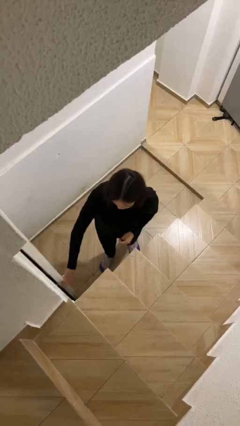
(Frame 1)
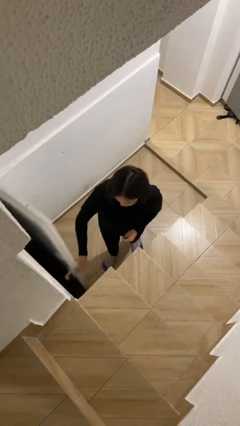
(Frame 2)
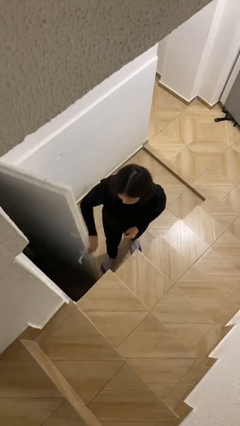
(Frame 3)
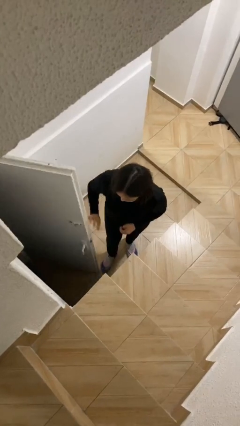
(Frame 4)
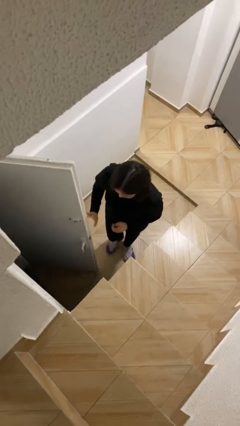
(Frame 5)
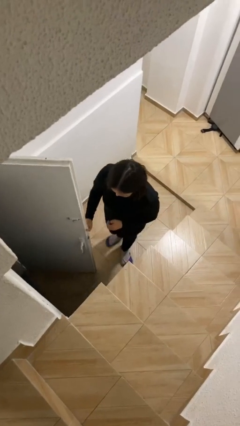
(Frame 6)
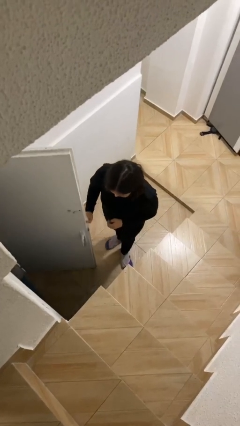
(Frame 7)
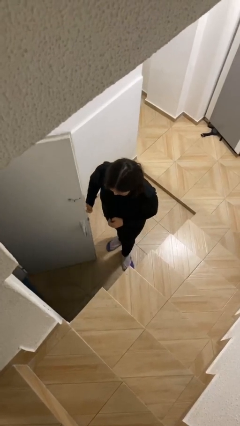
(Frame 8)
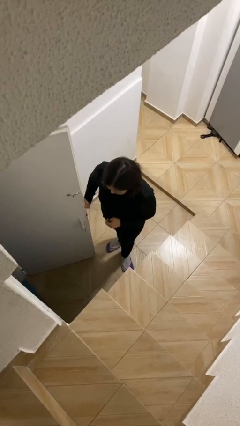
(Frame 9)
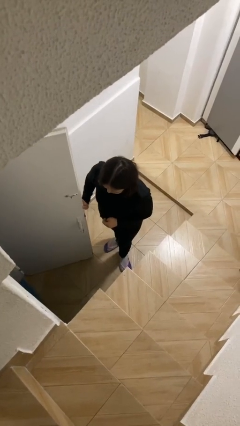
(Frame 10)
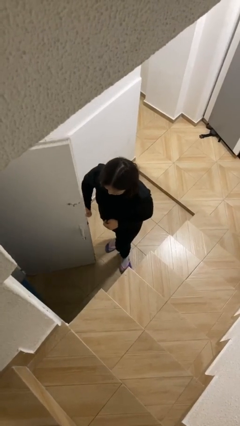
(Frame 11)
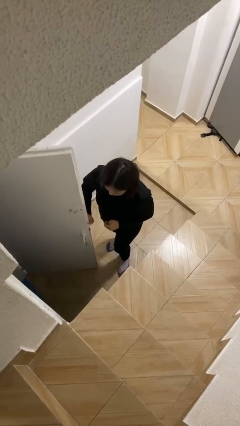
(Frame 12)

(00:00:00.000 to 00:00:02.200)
person opens facility door

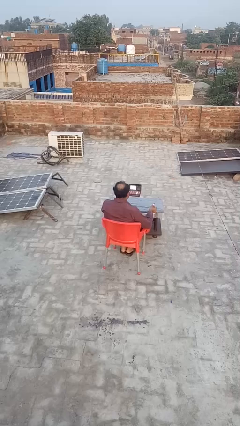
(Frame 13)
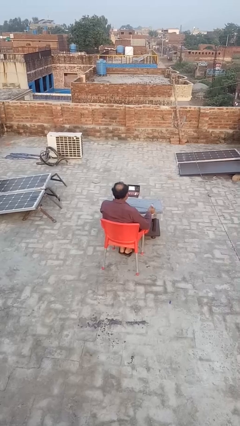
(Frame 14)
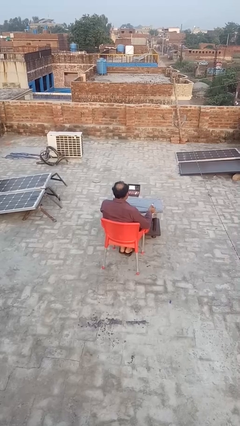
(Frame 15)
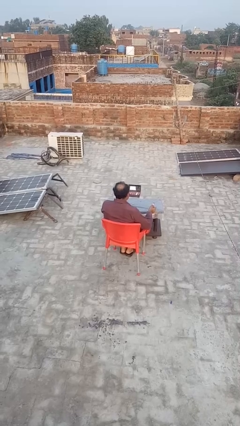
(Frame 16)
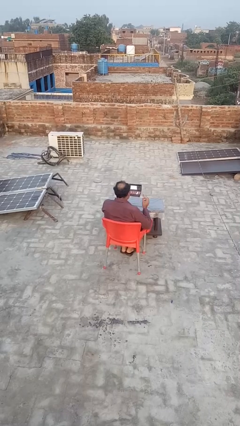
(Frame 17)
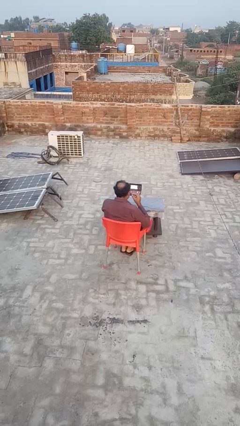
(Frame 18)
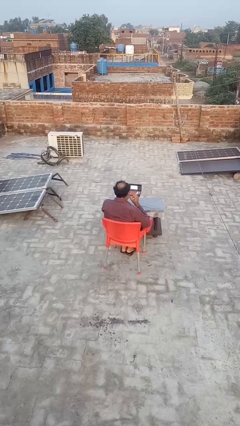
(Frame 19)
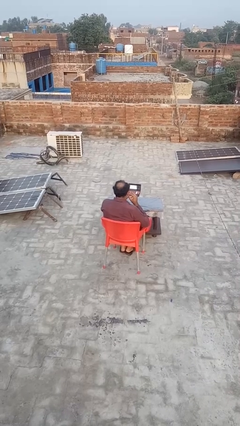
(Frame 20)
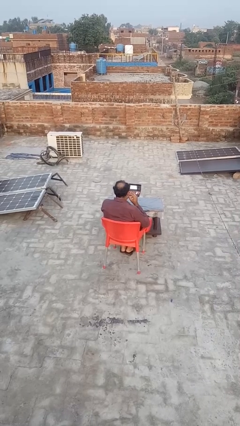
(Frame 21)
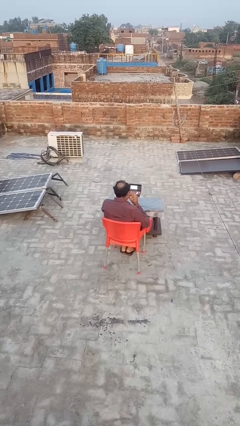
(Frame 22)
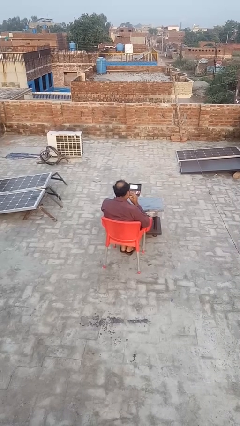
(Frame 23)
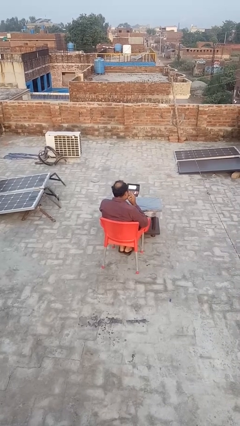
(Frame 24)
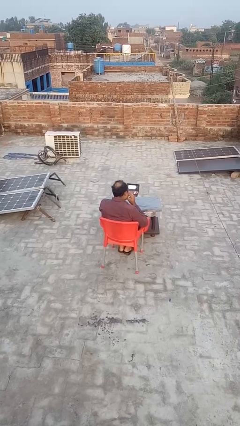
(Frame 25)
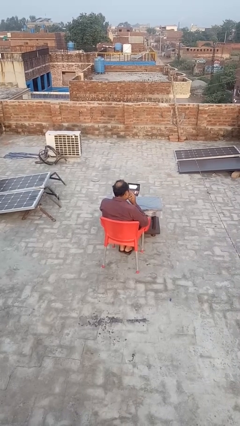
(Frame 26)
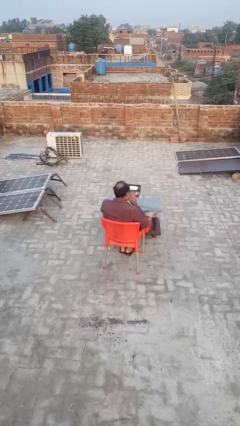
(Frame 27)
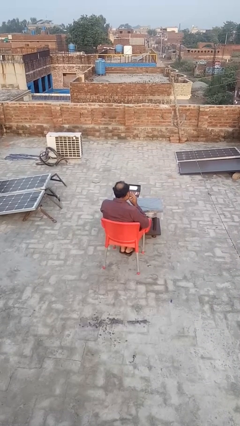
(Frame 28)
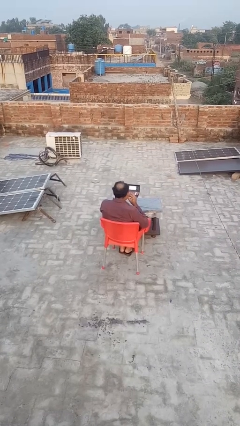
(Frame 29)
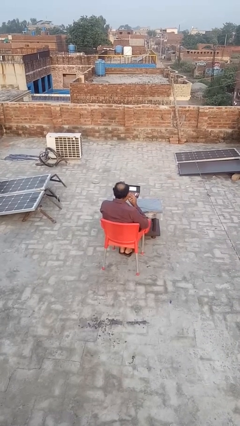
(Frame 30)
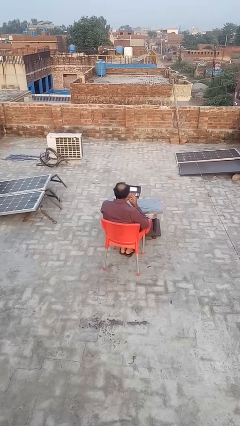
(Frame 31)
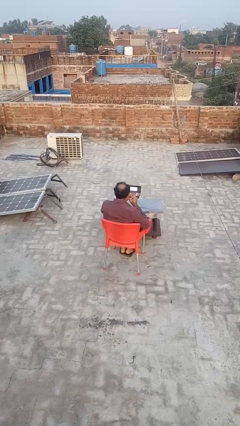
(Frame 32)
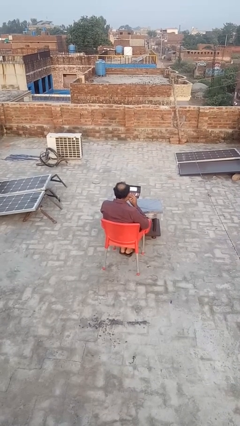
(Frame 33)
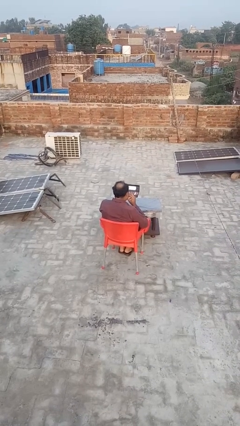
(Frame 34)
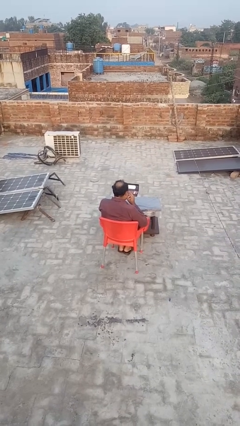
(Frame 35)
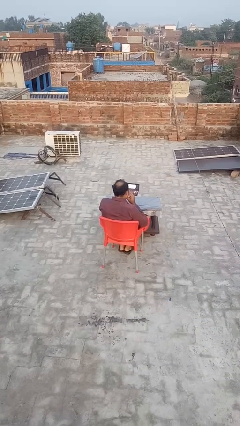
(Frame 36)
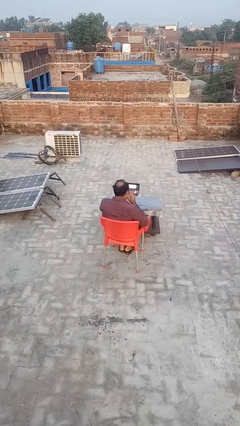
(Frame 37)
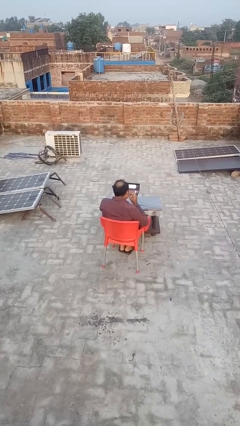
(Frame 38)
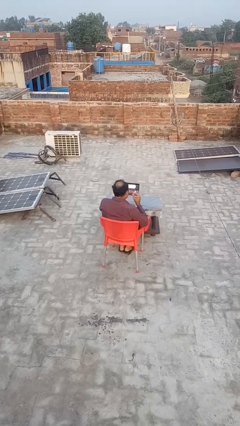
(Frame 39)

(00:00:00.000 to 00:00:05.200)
person applies lip makeup

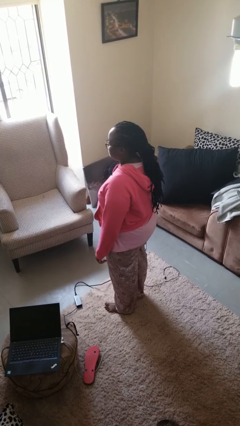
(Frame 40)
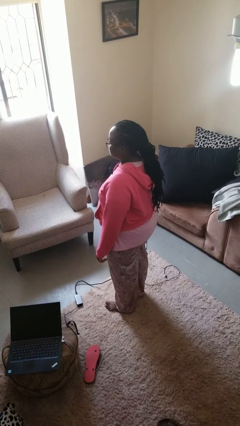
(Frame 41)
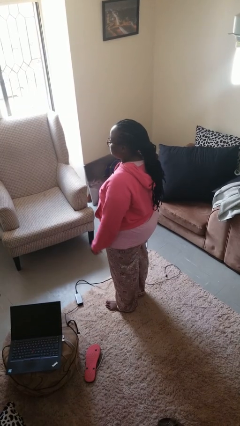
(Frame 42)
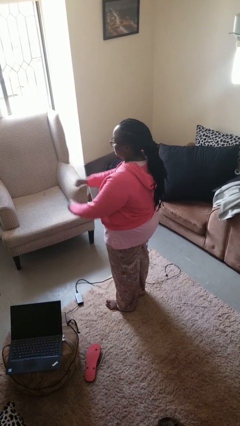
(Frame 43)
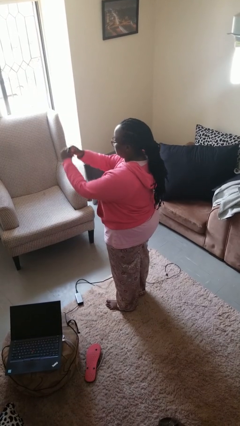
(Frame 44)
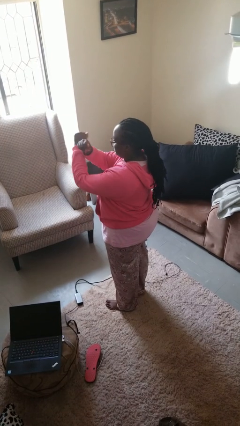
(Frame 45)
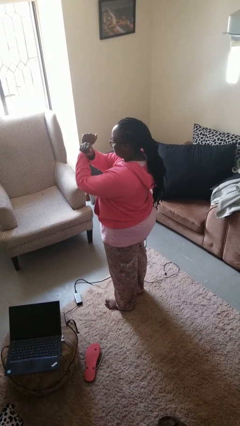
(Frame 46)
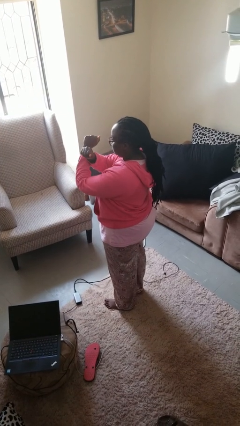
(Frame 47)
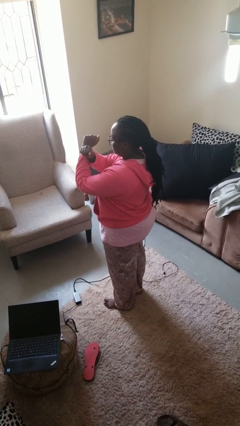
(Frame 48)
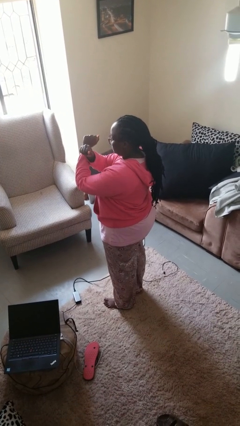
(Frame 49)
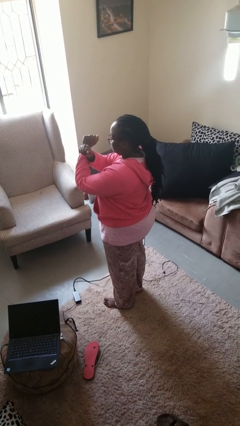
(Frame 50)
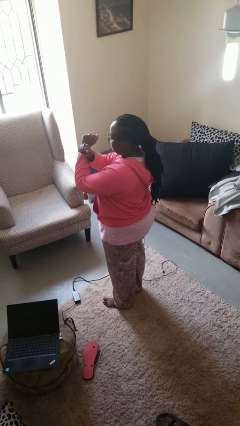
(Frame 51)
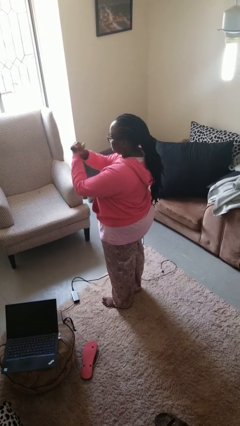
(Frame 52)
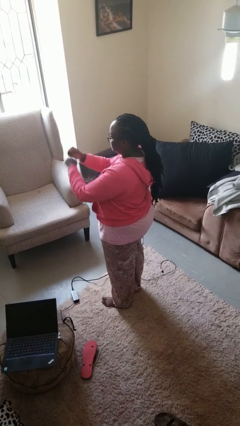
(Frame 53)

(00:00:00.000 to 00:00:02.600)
person gestures arms x

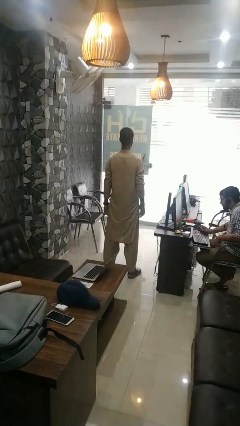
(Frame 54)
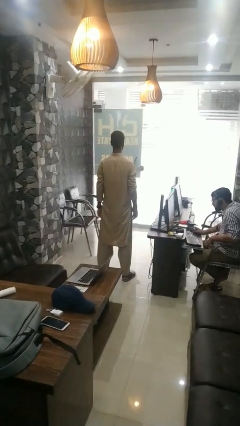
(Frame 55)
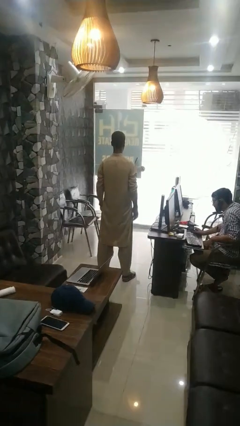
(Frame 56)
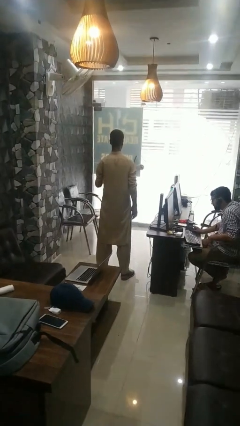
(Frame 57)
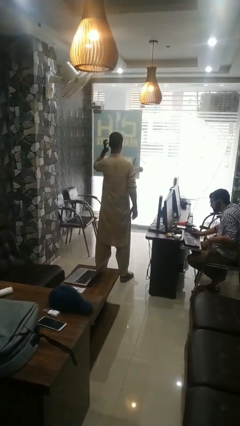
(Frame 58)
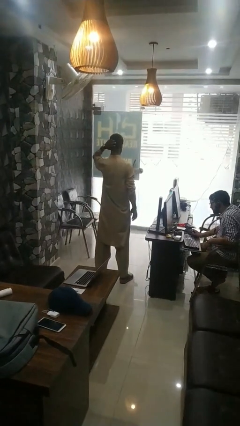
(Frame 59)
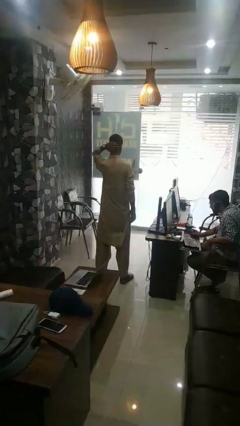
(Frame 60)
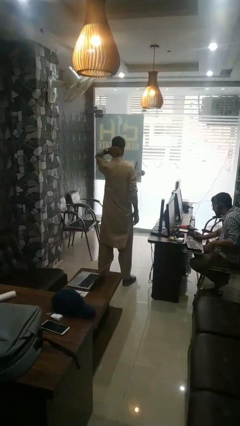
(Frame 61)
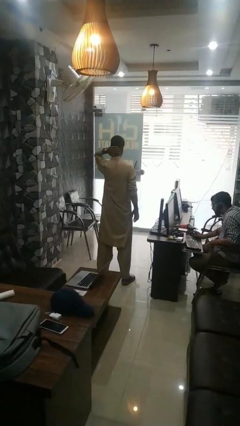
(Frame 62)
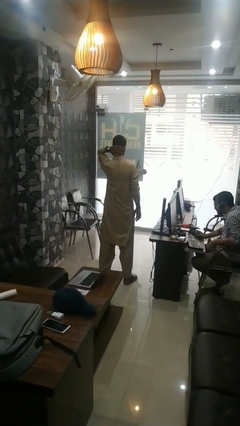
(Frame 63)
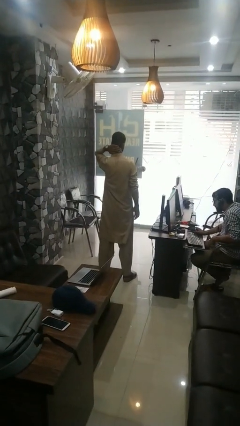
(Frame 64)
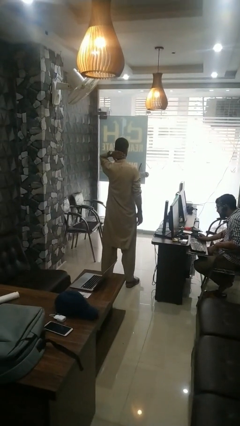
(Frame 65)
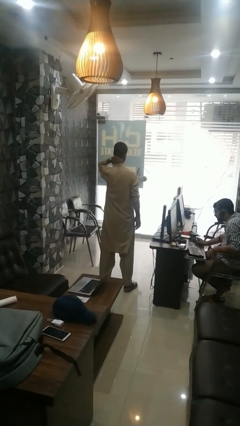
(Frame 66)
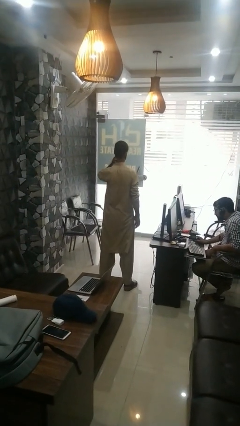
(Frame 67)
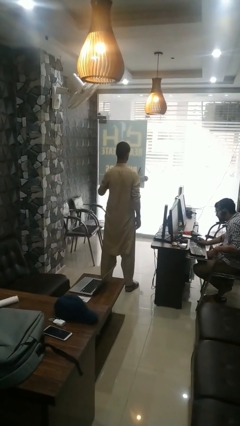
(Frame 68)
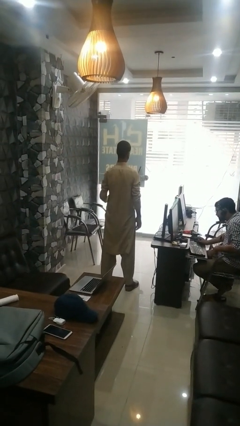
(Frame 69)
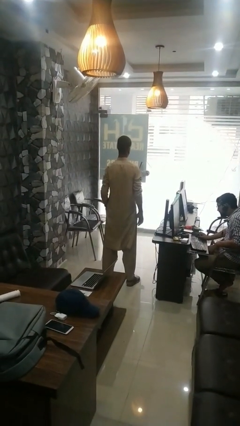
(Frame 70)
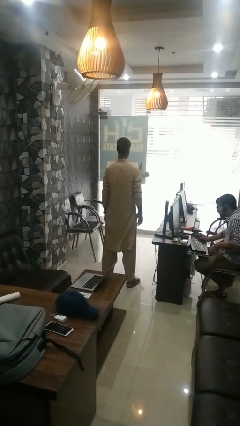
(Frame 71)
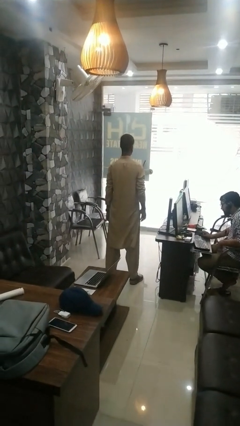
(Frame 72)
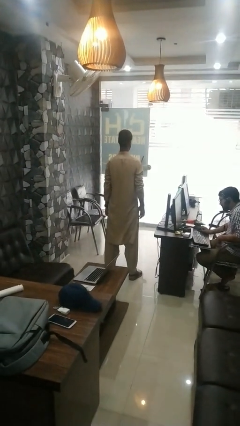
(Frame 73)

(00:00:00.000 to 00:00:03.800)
person rubs neck

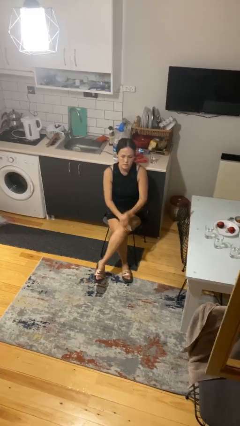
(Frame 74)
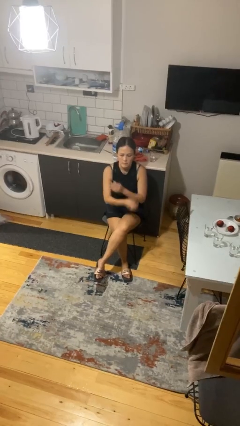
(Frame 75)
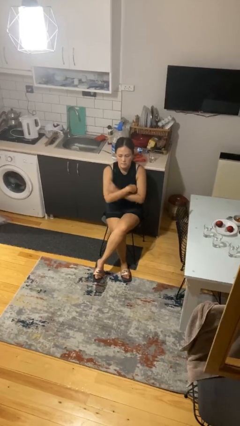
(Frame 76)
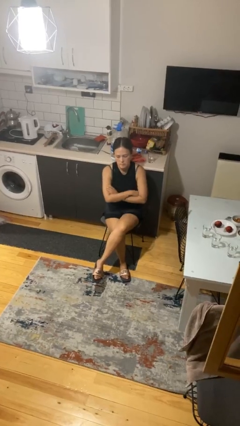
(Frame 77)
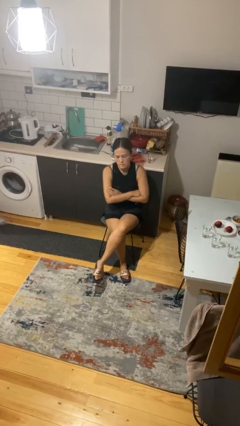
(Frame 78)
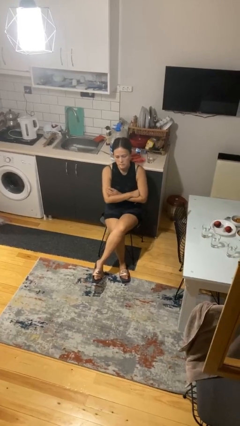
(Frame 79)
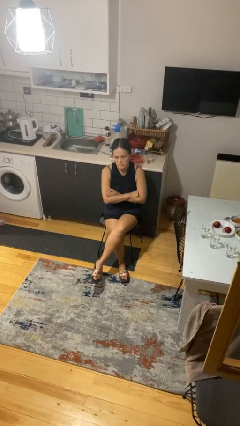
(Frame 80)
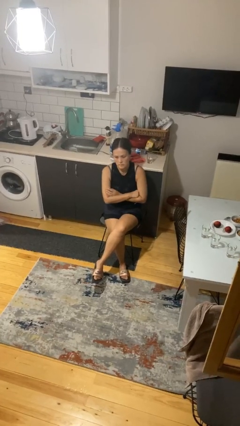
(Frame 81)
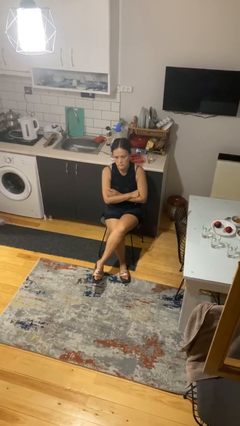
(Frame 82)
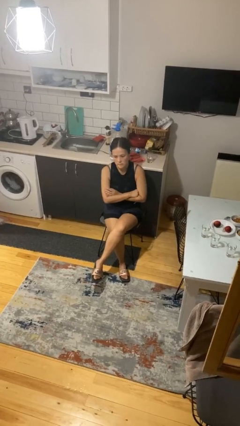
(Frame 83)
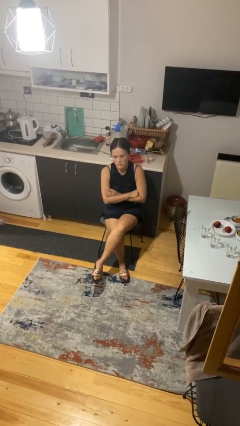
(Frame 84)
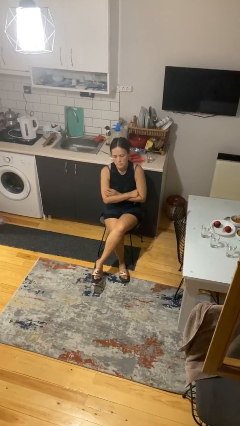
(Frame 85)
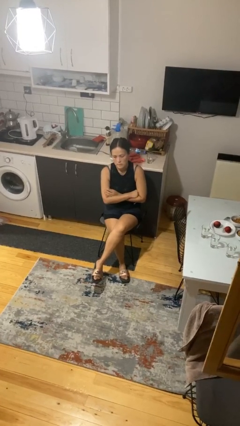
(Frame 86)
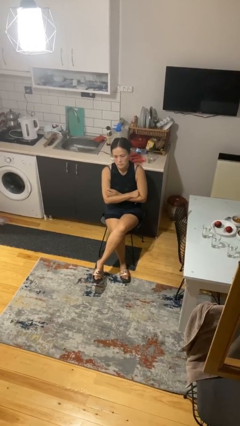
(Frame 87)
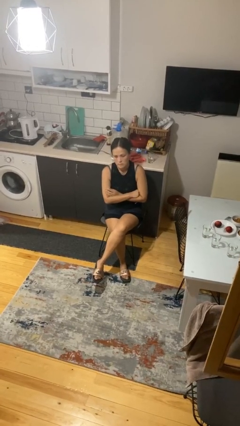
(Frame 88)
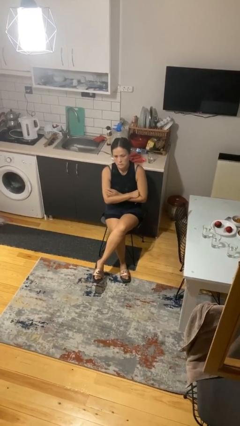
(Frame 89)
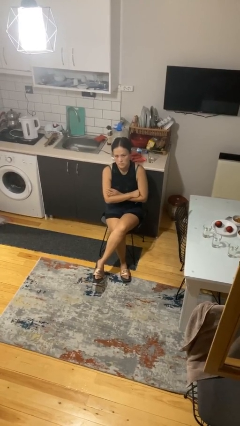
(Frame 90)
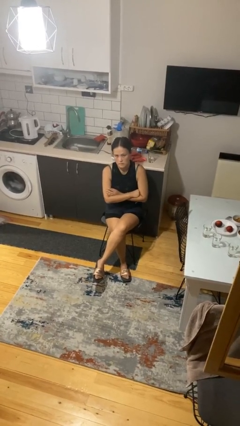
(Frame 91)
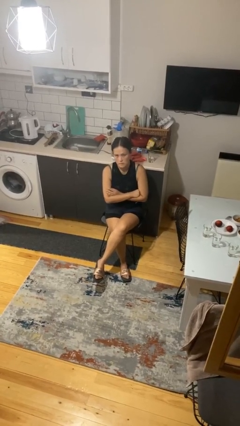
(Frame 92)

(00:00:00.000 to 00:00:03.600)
person crosses arms

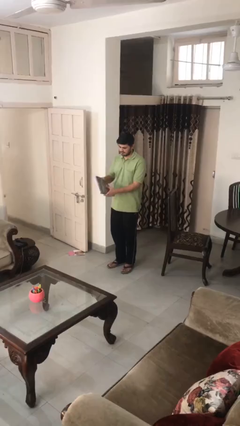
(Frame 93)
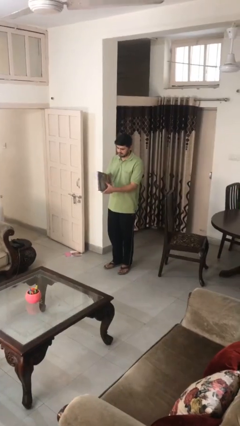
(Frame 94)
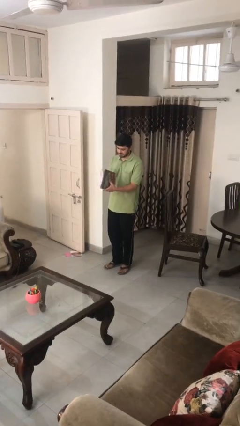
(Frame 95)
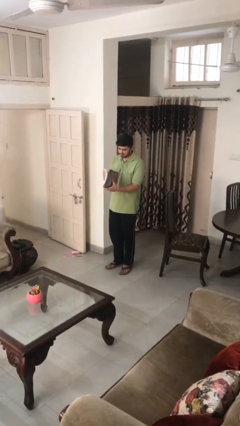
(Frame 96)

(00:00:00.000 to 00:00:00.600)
person reads document
